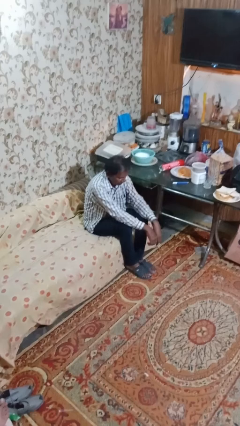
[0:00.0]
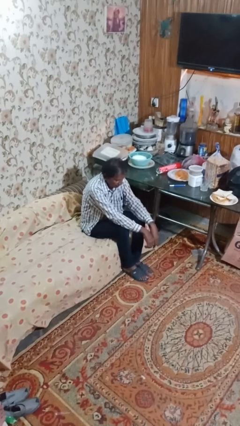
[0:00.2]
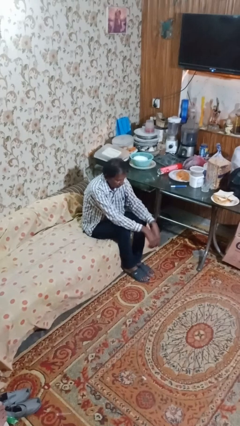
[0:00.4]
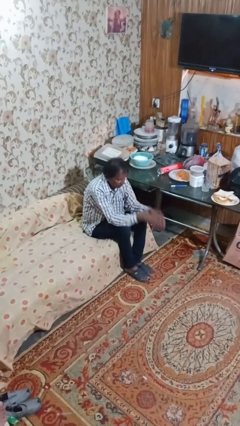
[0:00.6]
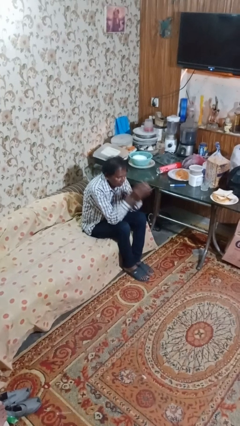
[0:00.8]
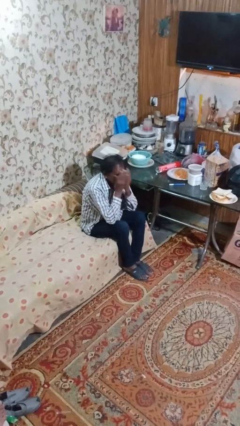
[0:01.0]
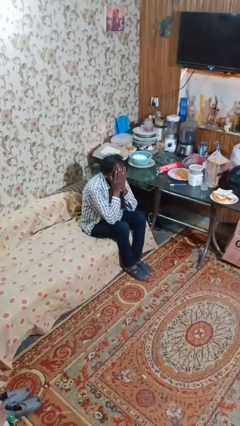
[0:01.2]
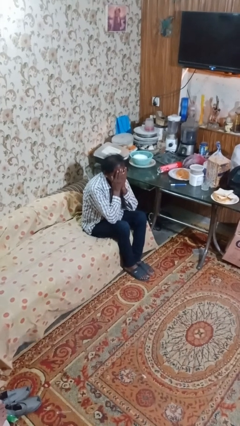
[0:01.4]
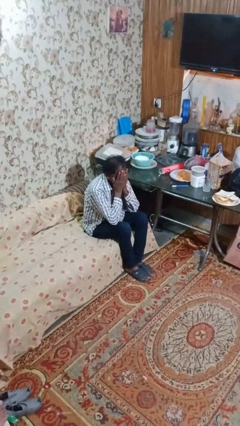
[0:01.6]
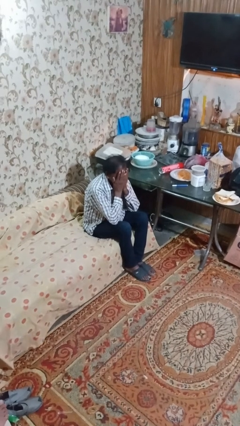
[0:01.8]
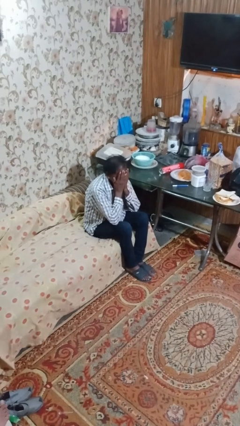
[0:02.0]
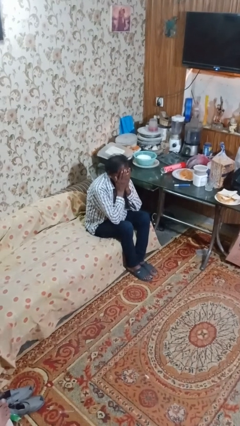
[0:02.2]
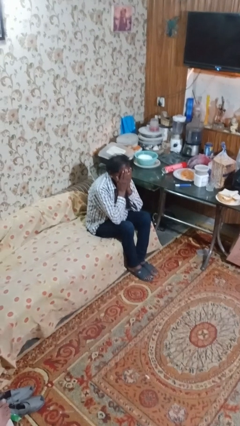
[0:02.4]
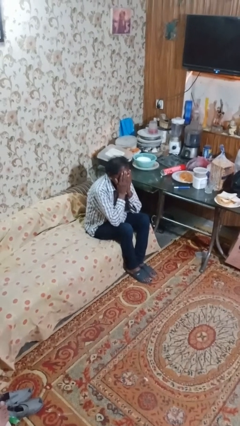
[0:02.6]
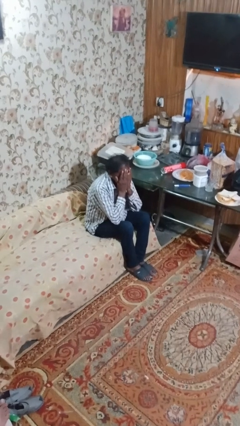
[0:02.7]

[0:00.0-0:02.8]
person covers face with hands

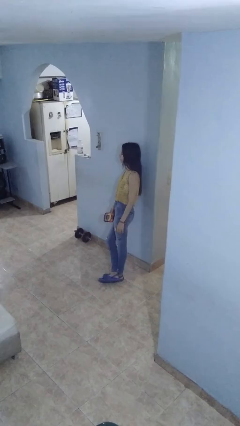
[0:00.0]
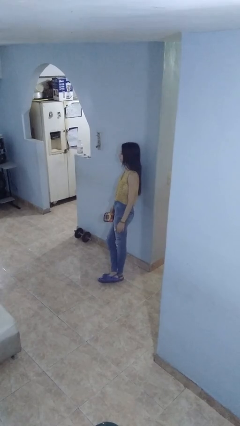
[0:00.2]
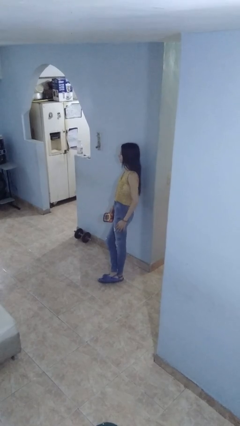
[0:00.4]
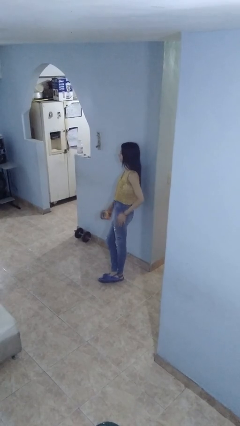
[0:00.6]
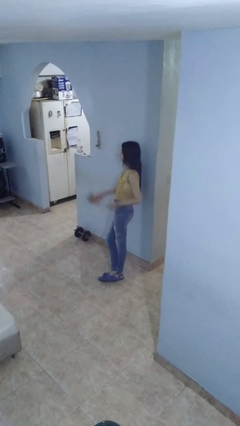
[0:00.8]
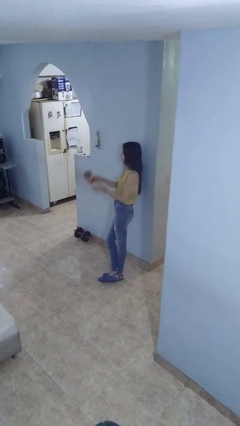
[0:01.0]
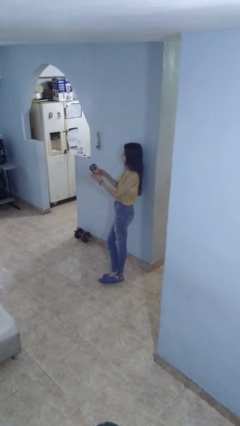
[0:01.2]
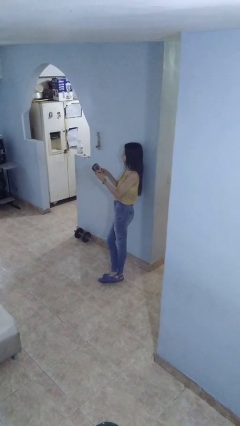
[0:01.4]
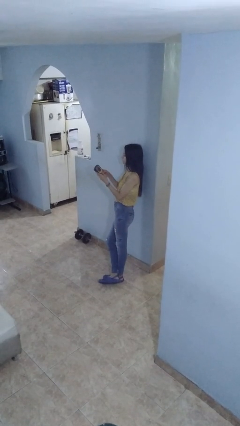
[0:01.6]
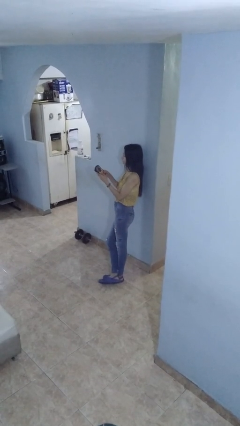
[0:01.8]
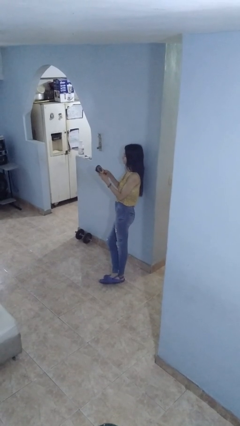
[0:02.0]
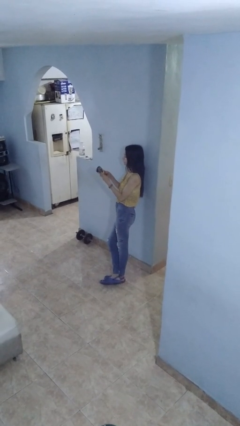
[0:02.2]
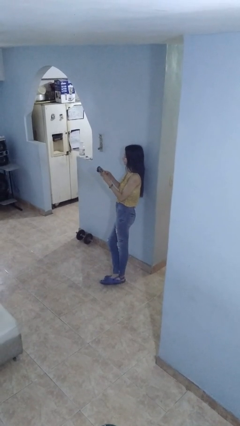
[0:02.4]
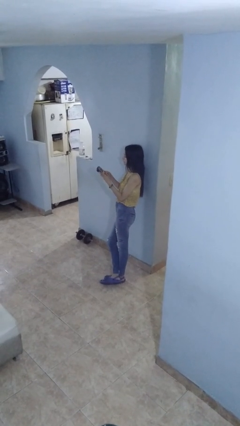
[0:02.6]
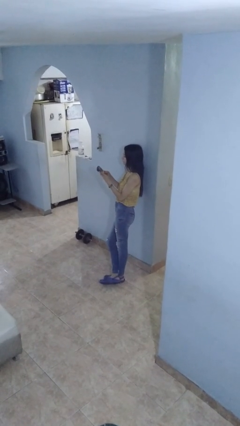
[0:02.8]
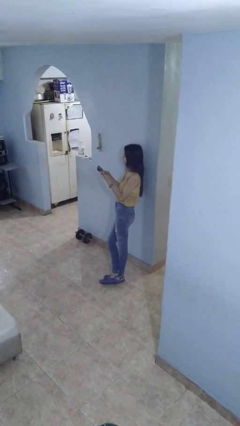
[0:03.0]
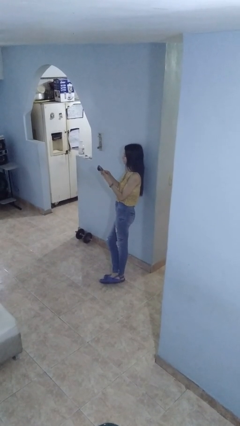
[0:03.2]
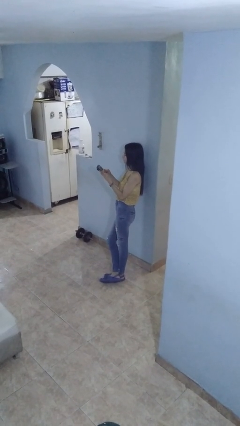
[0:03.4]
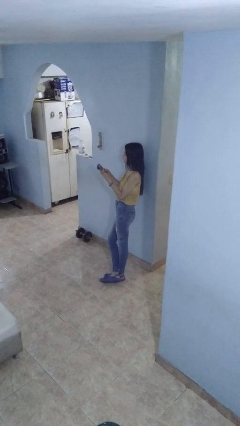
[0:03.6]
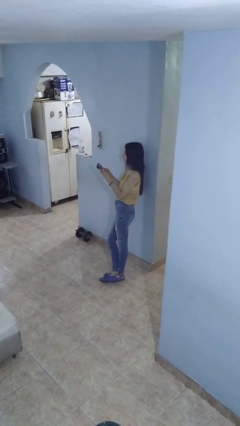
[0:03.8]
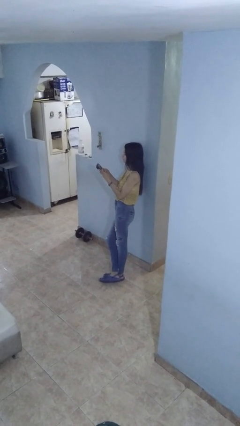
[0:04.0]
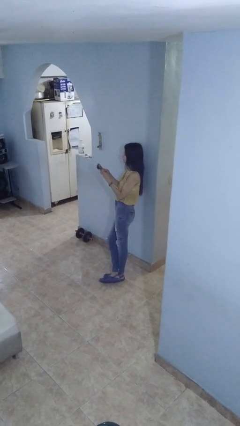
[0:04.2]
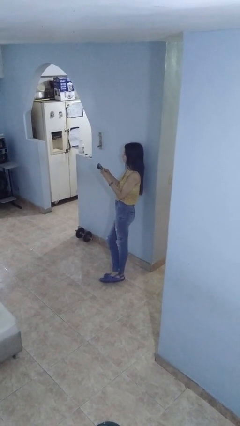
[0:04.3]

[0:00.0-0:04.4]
person interacts with handheld game

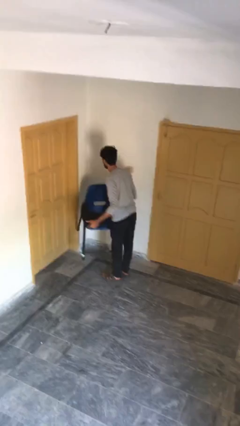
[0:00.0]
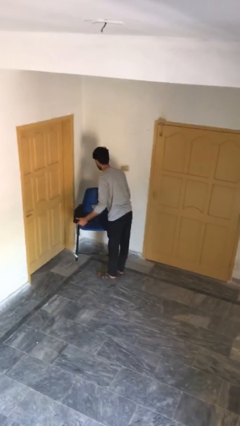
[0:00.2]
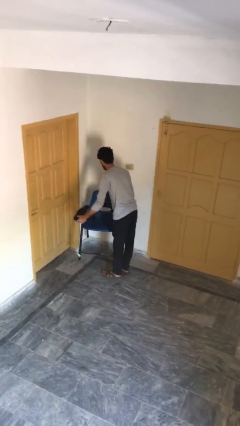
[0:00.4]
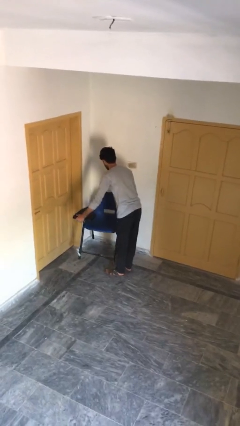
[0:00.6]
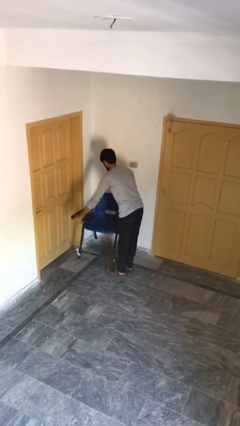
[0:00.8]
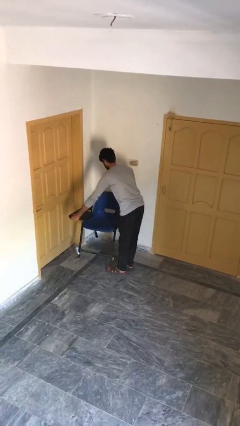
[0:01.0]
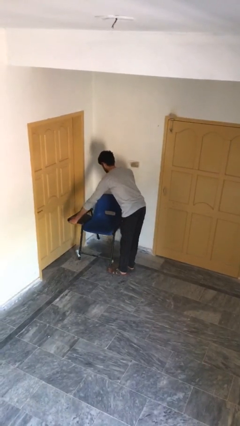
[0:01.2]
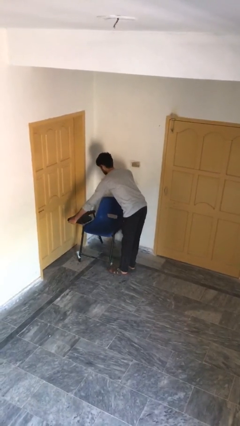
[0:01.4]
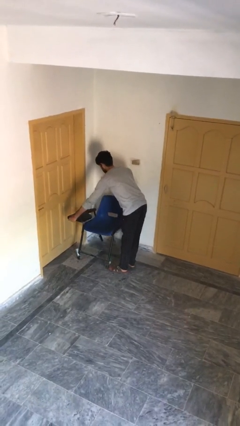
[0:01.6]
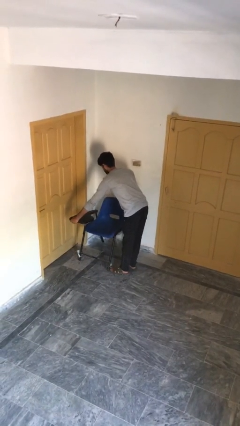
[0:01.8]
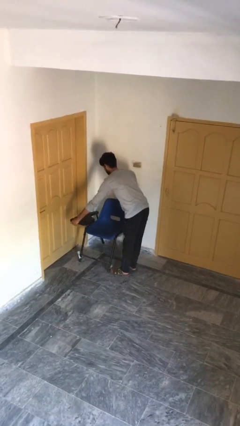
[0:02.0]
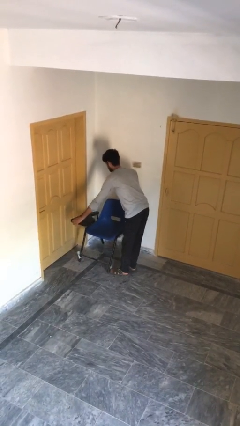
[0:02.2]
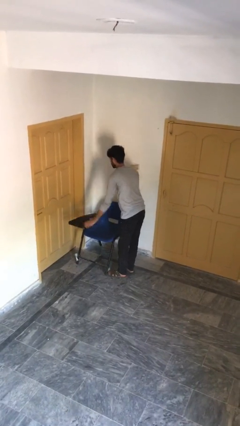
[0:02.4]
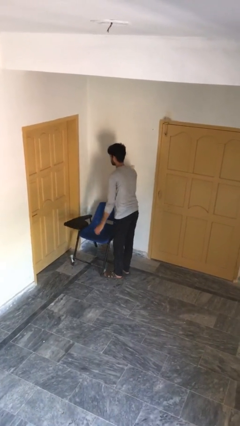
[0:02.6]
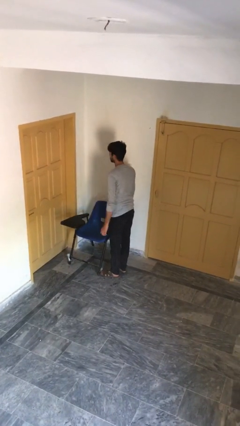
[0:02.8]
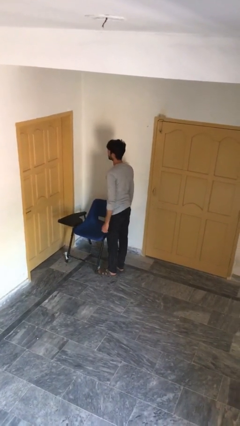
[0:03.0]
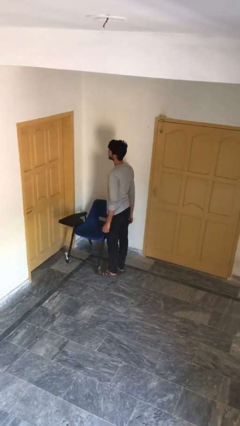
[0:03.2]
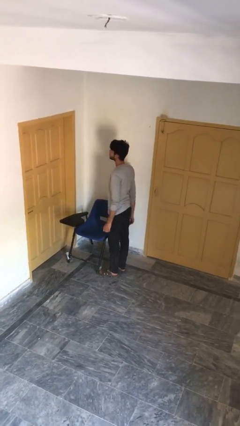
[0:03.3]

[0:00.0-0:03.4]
person puts down object on floor

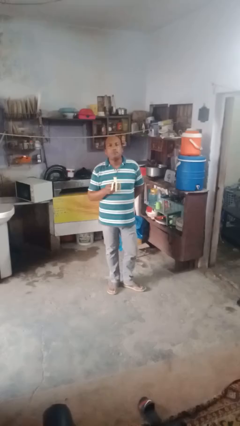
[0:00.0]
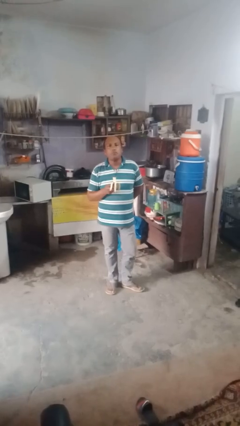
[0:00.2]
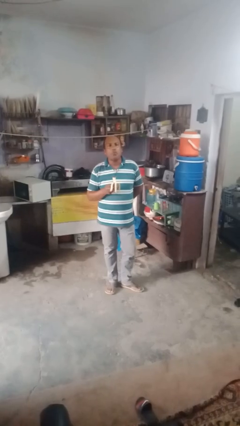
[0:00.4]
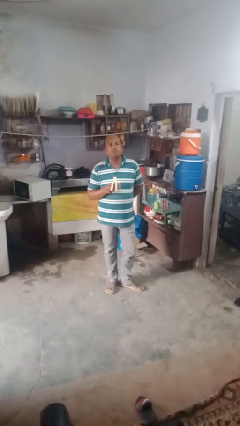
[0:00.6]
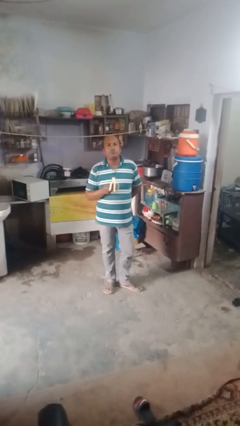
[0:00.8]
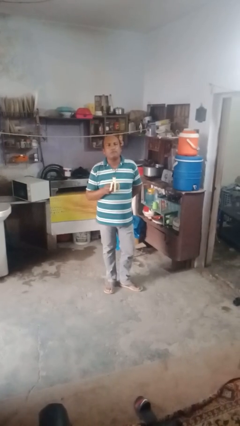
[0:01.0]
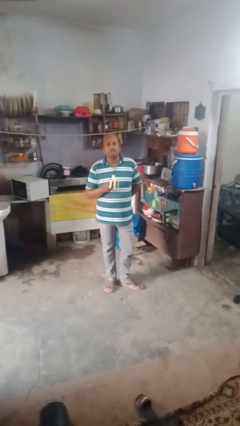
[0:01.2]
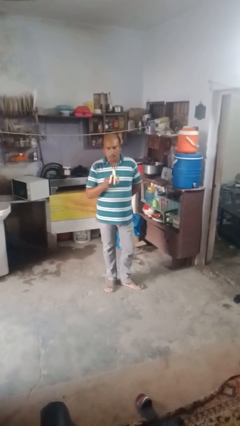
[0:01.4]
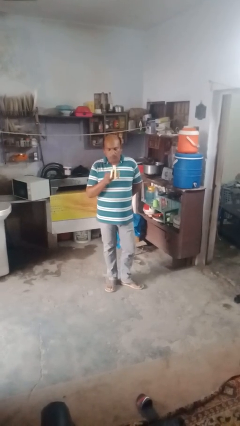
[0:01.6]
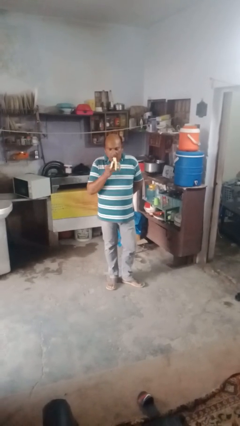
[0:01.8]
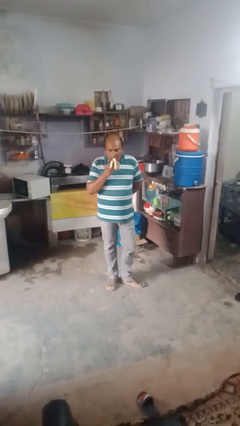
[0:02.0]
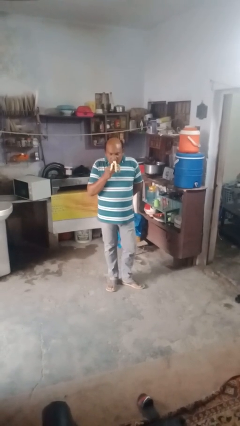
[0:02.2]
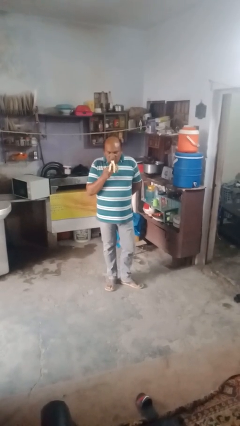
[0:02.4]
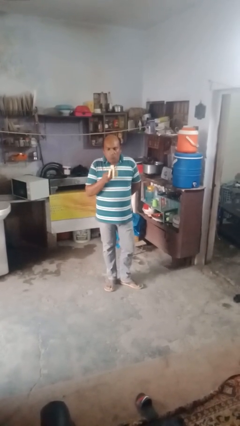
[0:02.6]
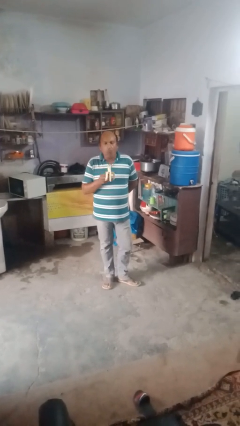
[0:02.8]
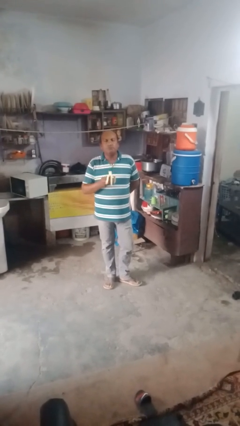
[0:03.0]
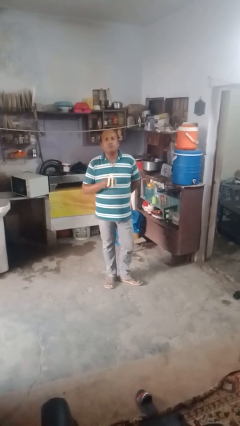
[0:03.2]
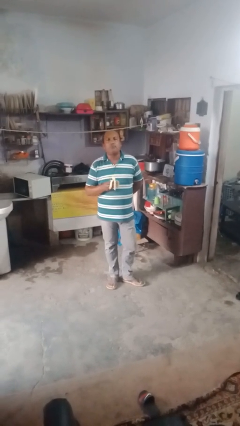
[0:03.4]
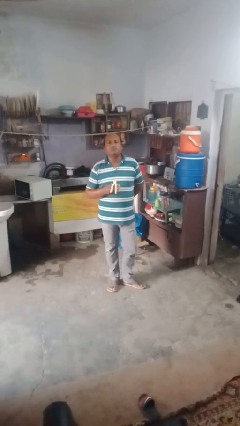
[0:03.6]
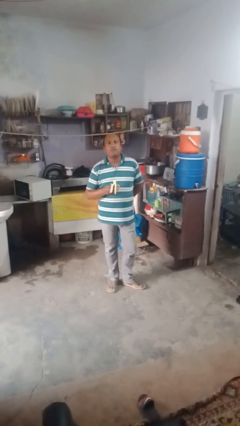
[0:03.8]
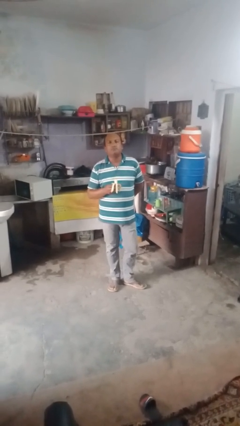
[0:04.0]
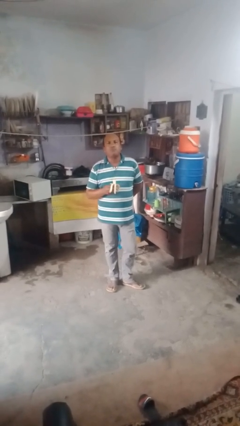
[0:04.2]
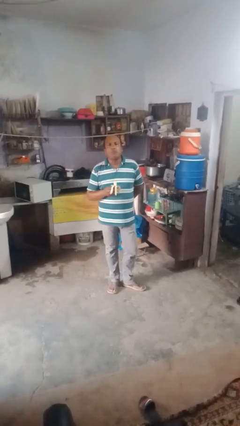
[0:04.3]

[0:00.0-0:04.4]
person eats banana

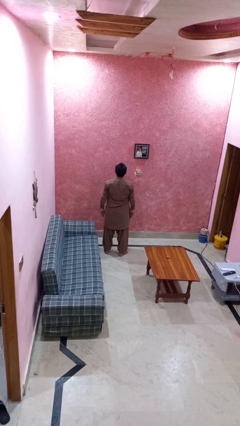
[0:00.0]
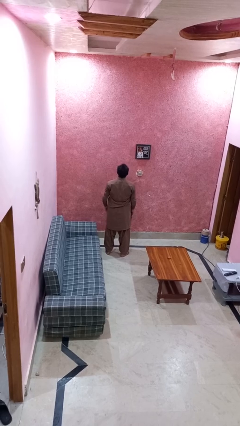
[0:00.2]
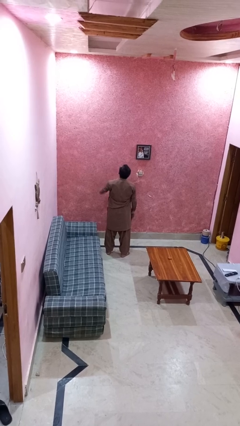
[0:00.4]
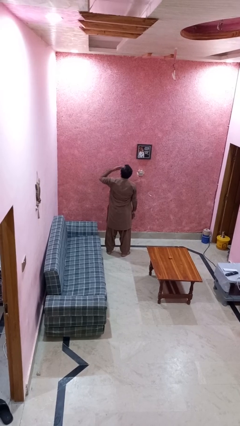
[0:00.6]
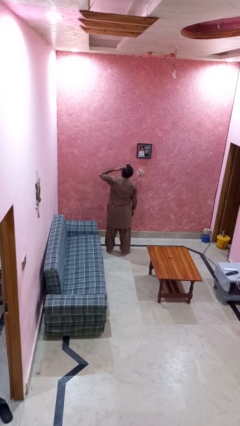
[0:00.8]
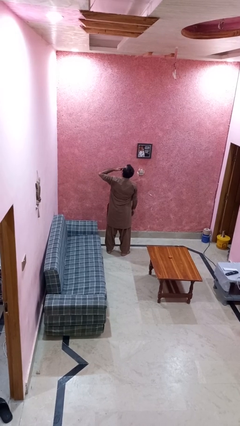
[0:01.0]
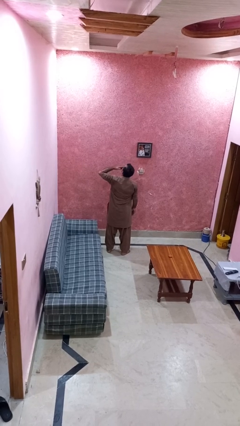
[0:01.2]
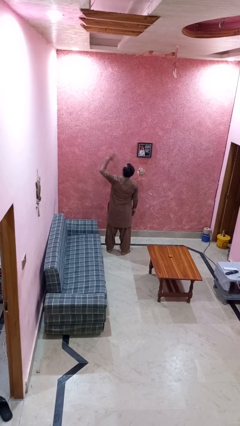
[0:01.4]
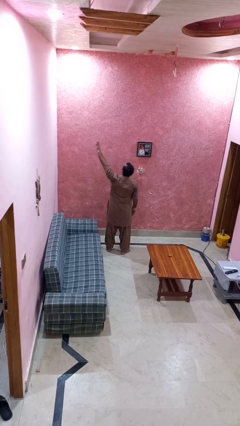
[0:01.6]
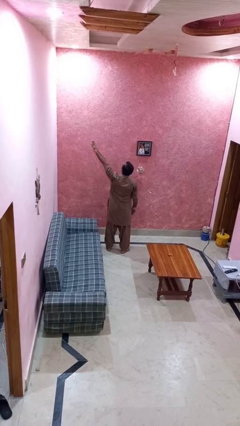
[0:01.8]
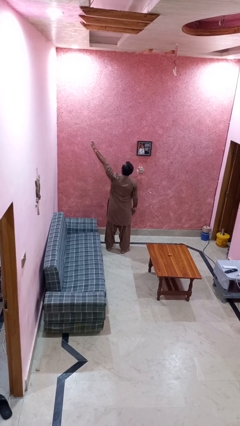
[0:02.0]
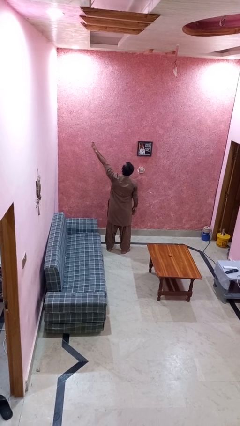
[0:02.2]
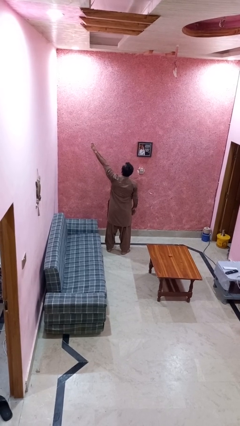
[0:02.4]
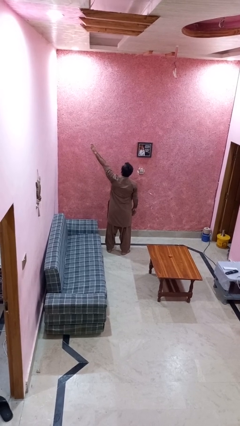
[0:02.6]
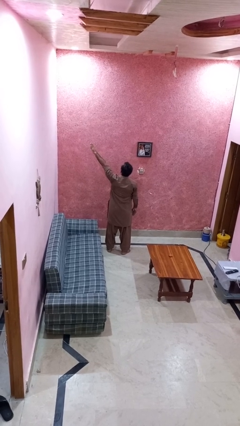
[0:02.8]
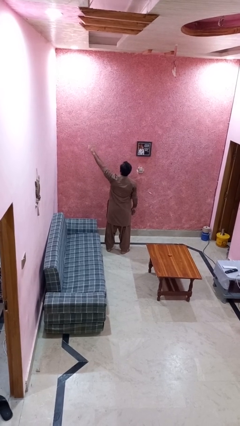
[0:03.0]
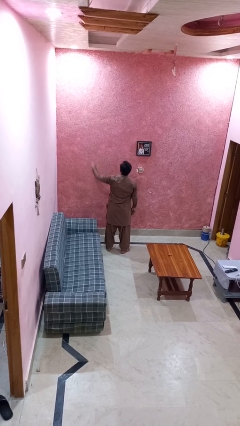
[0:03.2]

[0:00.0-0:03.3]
person gestures blow kiss
